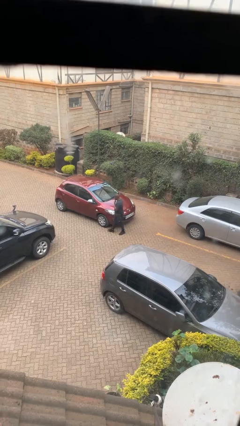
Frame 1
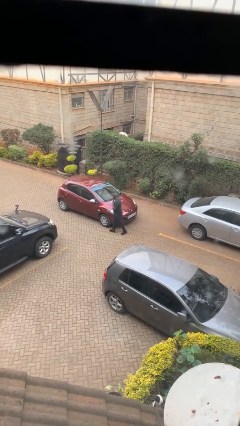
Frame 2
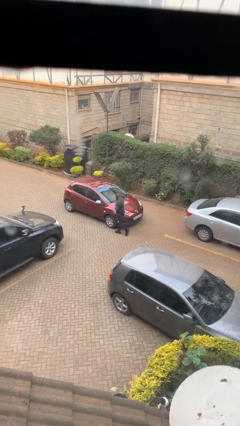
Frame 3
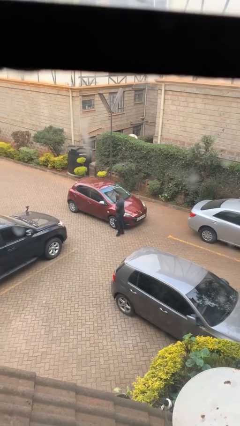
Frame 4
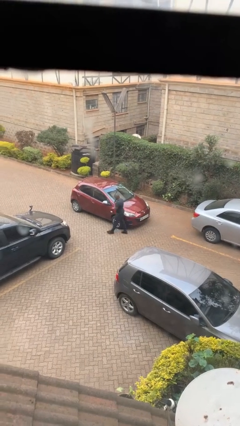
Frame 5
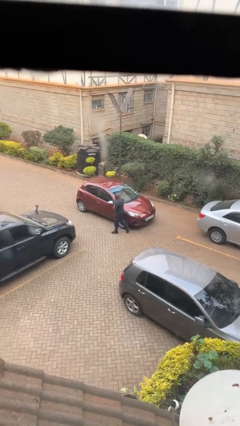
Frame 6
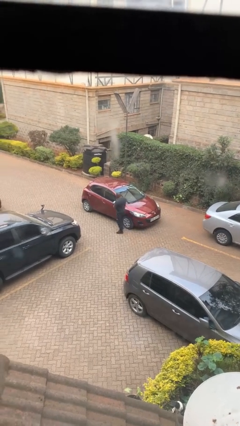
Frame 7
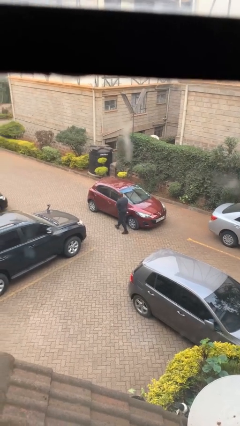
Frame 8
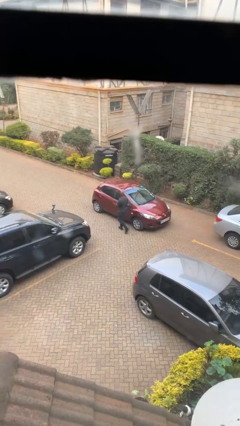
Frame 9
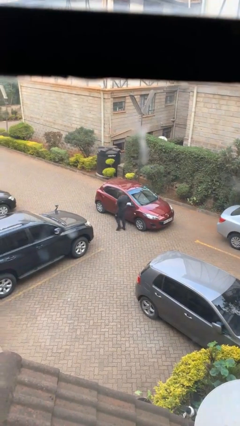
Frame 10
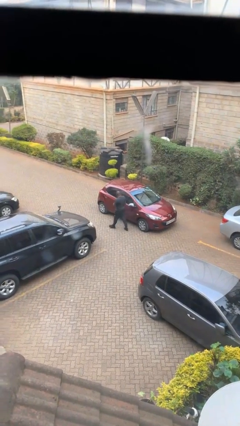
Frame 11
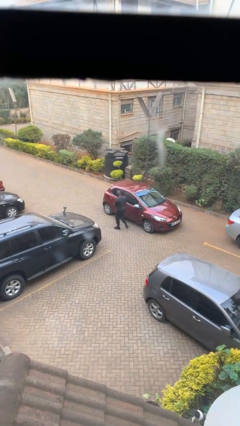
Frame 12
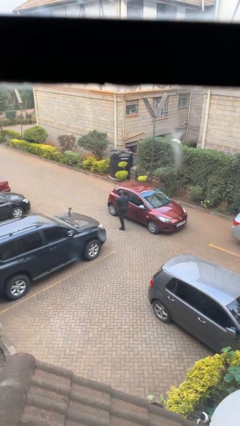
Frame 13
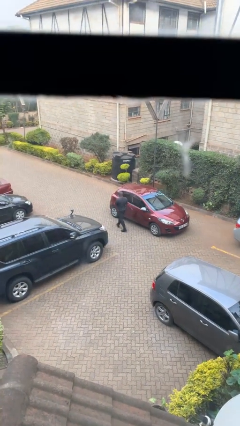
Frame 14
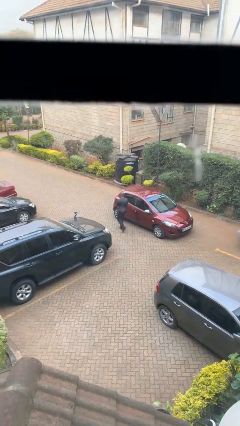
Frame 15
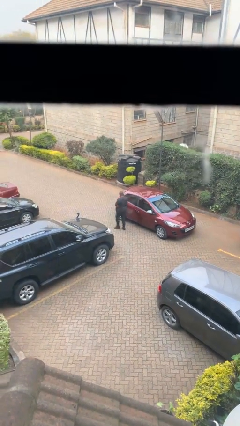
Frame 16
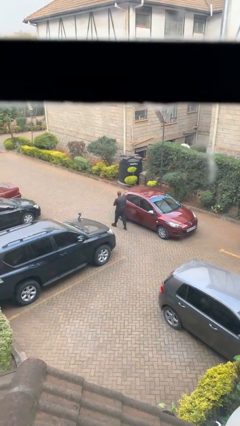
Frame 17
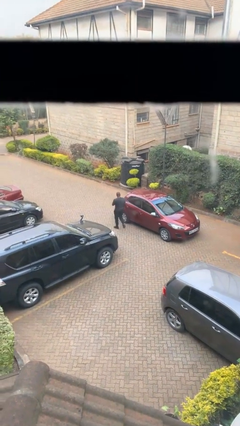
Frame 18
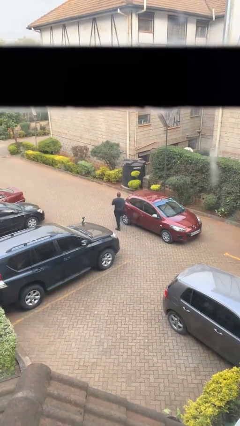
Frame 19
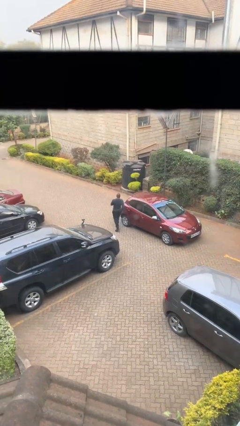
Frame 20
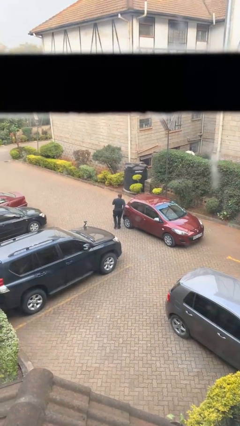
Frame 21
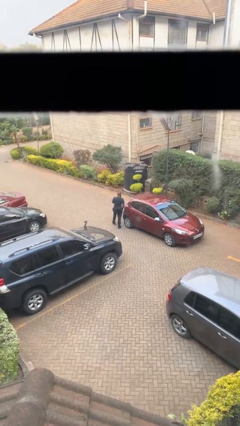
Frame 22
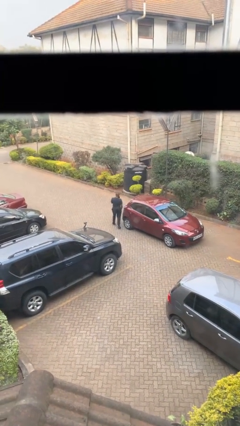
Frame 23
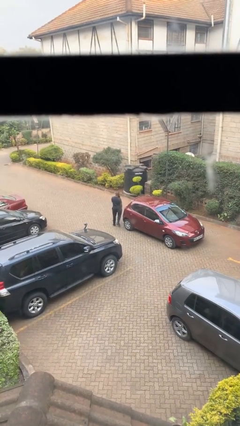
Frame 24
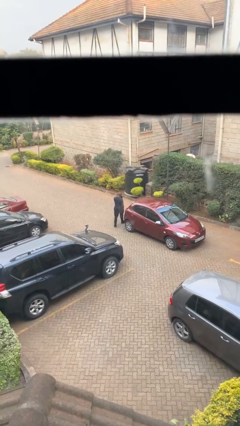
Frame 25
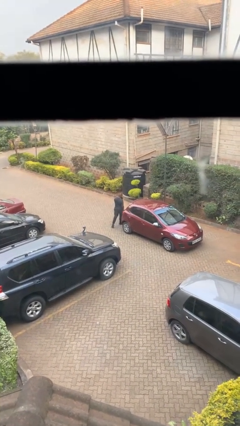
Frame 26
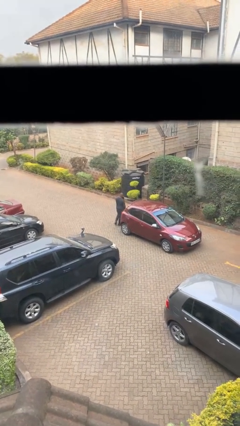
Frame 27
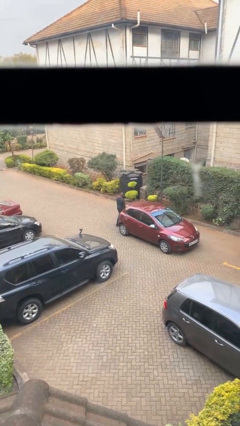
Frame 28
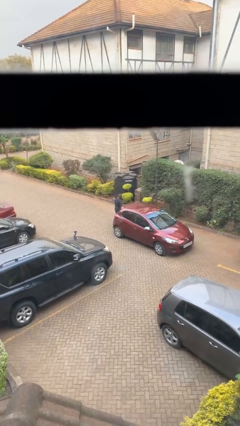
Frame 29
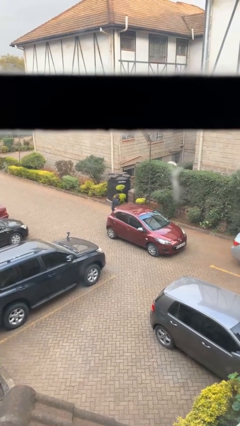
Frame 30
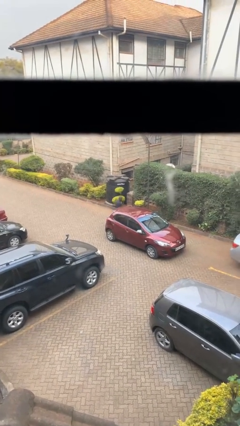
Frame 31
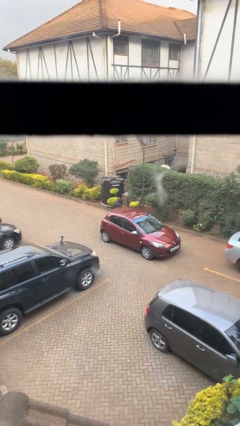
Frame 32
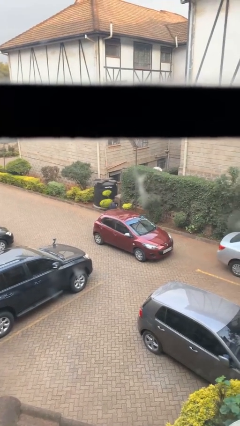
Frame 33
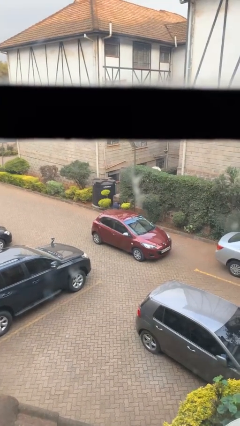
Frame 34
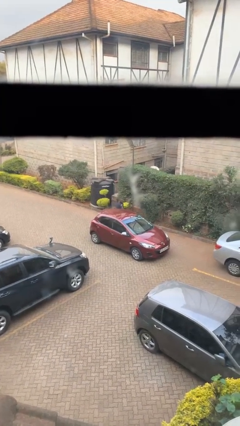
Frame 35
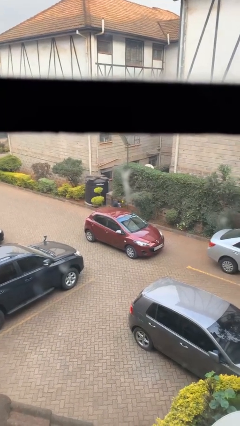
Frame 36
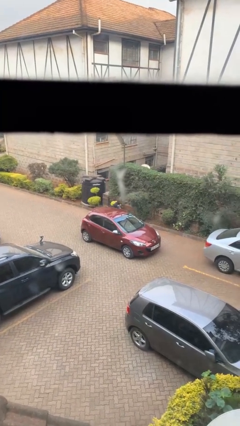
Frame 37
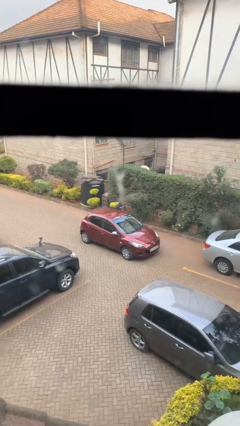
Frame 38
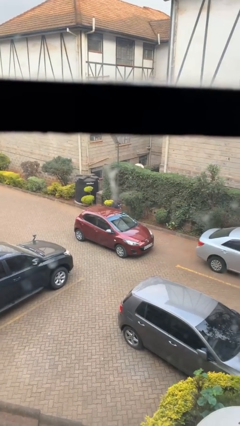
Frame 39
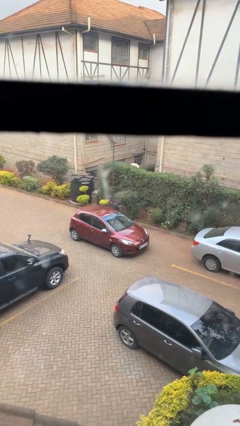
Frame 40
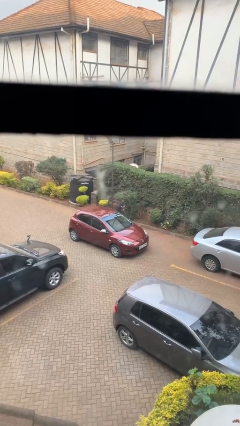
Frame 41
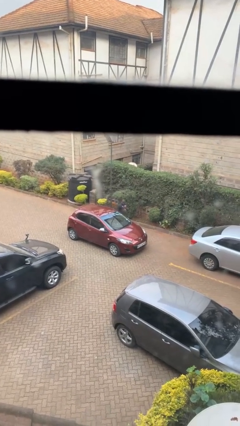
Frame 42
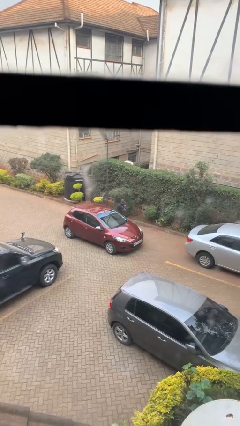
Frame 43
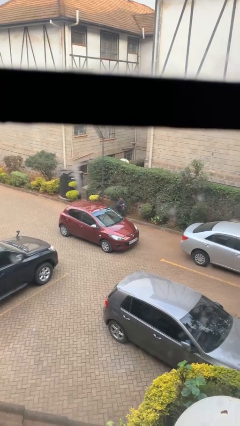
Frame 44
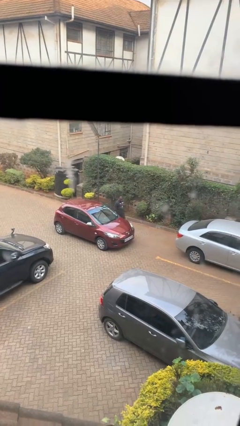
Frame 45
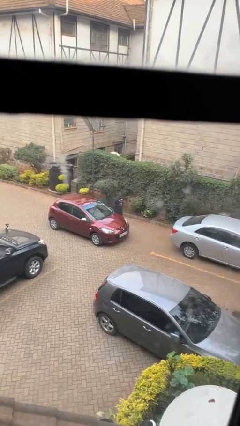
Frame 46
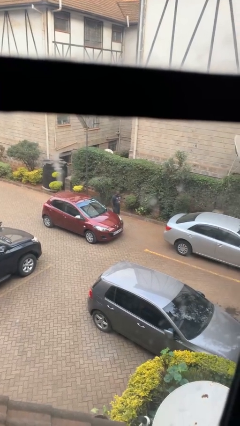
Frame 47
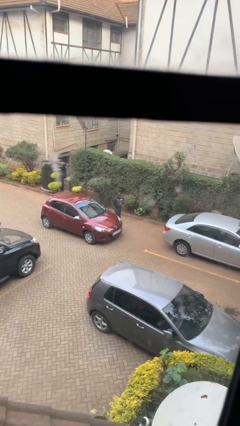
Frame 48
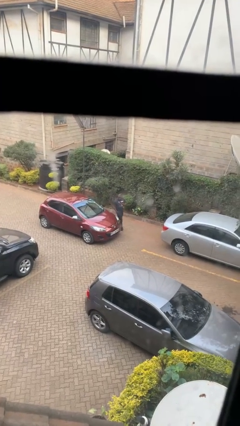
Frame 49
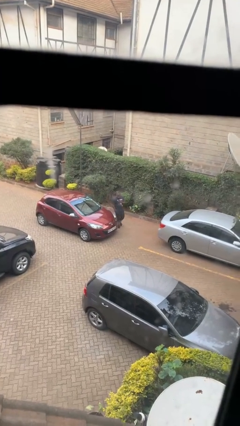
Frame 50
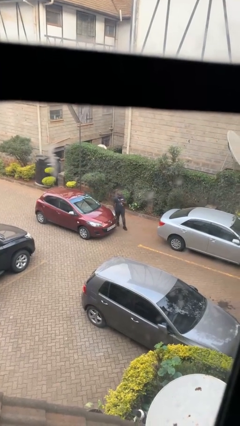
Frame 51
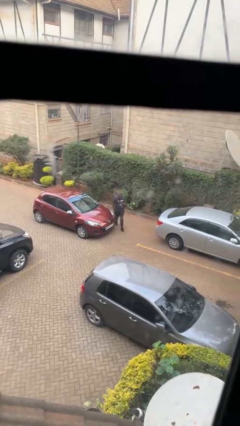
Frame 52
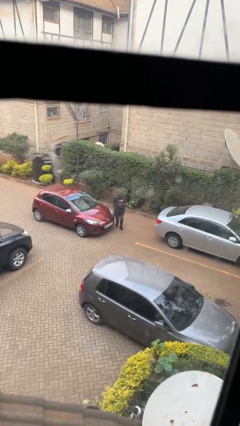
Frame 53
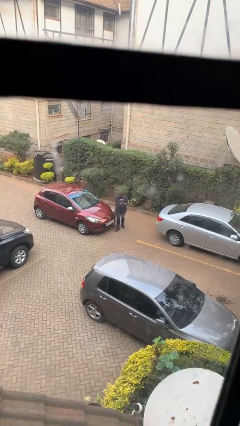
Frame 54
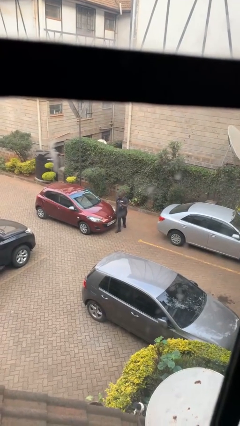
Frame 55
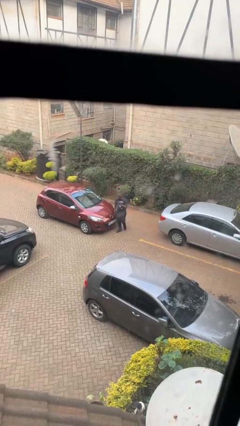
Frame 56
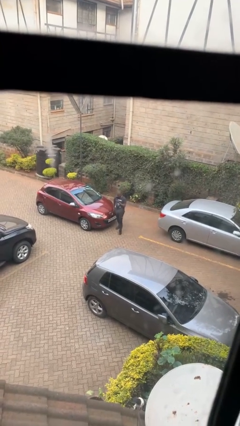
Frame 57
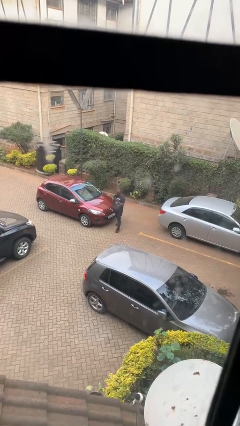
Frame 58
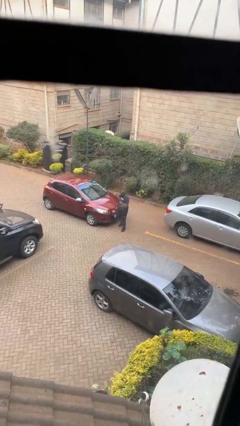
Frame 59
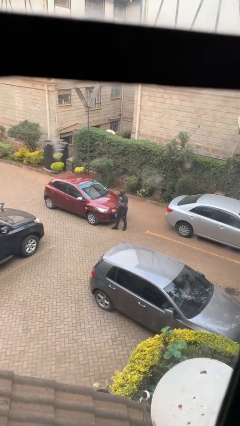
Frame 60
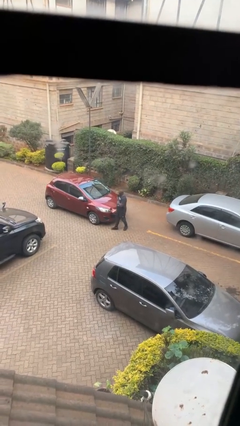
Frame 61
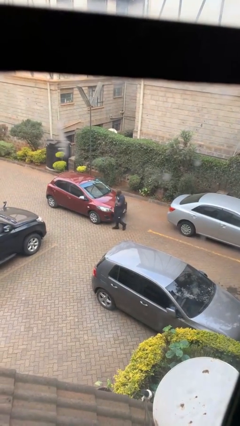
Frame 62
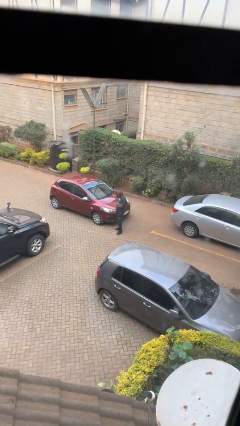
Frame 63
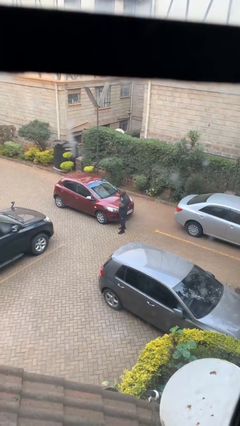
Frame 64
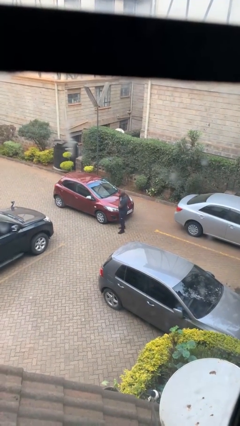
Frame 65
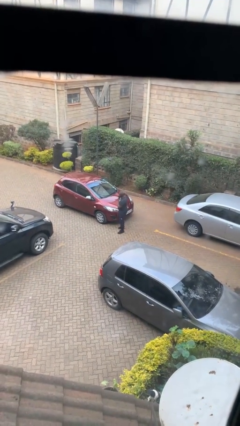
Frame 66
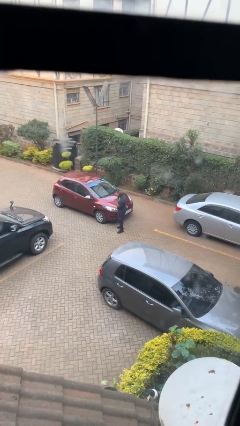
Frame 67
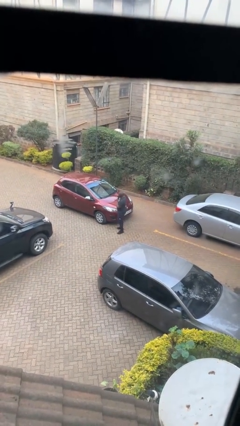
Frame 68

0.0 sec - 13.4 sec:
person walks around car

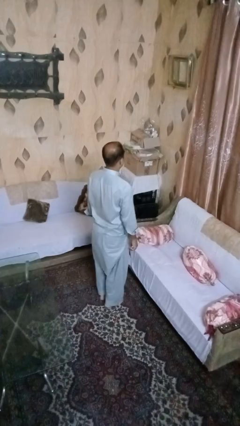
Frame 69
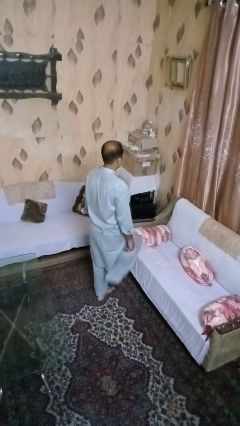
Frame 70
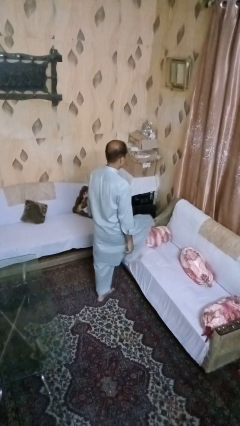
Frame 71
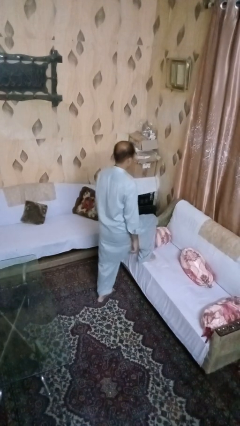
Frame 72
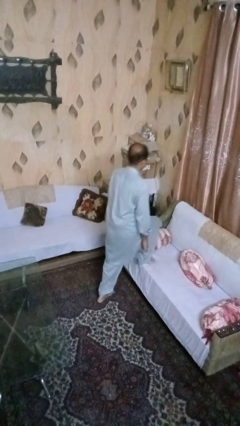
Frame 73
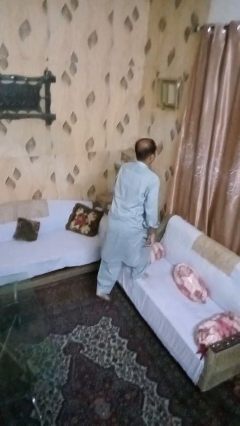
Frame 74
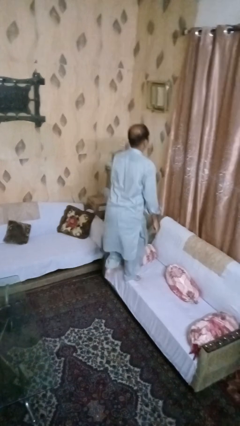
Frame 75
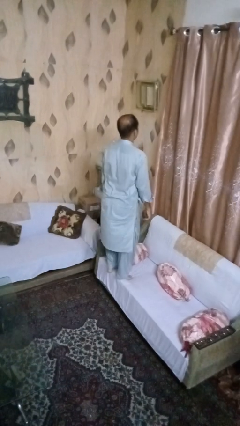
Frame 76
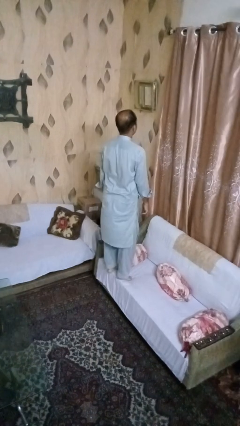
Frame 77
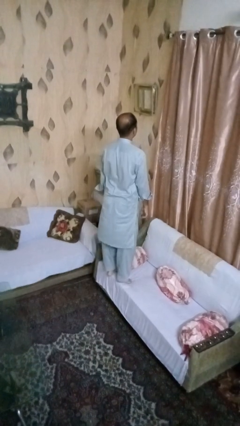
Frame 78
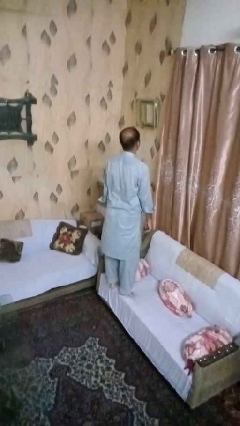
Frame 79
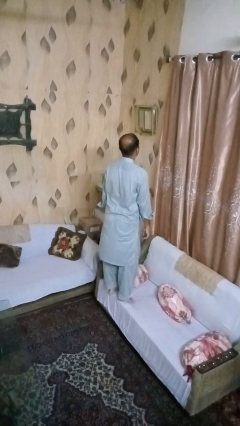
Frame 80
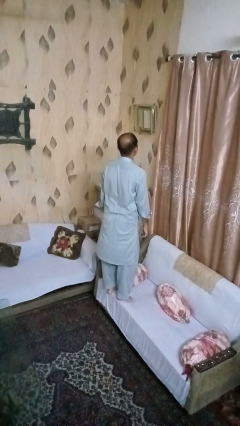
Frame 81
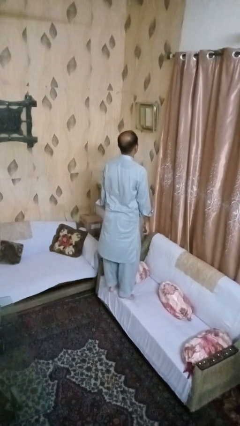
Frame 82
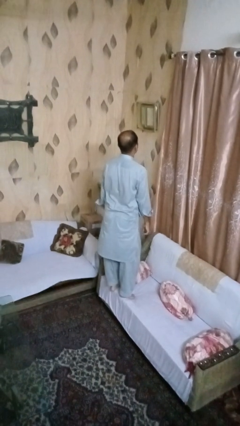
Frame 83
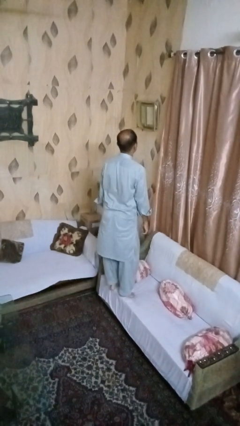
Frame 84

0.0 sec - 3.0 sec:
person climbs on couch

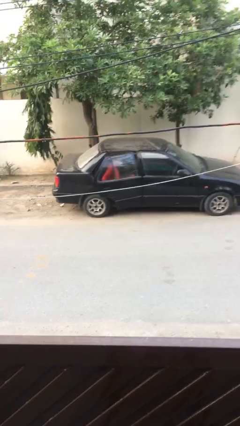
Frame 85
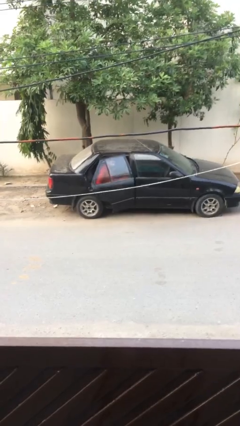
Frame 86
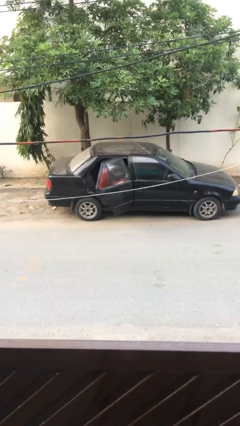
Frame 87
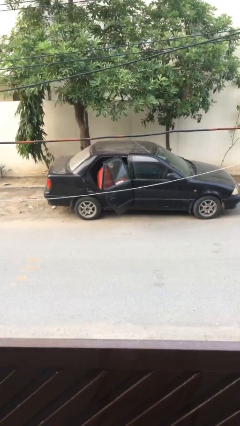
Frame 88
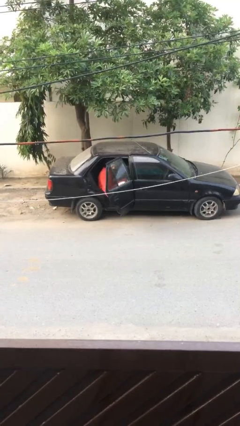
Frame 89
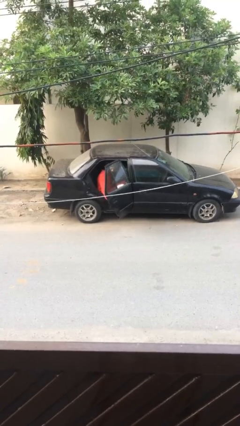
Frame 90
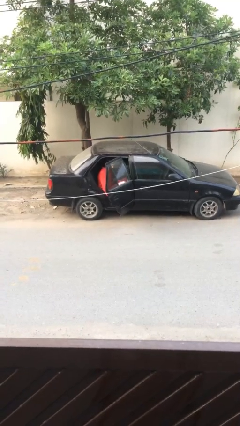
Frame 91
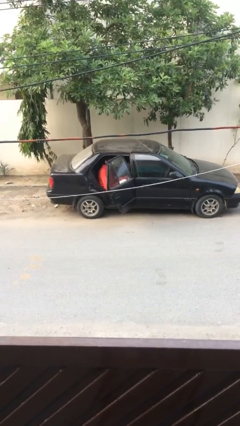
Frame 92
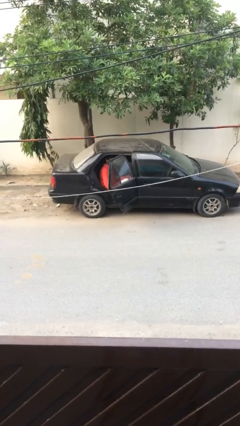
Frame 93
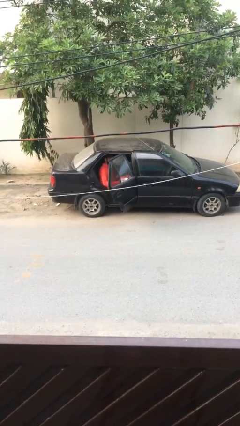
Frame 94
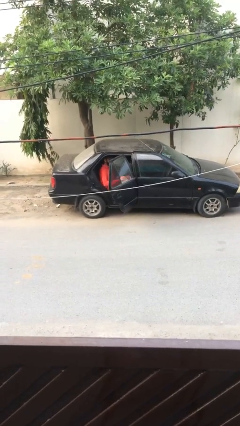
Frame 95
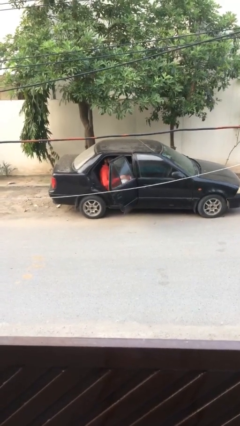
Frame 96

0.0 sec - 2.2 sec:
person opens car door
